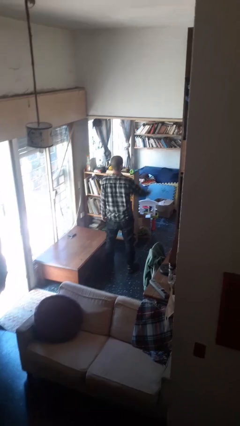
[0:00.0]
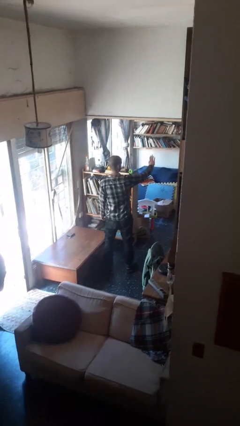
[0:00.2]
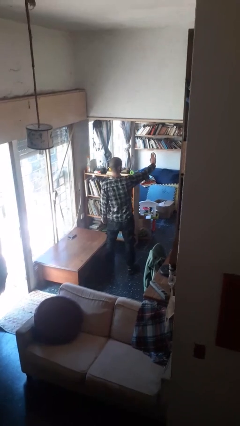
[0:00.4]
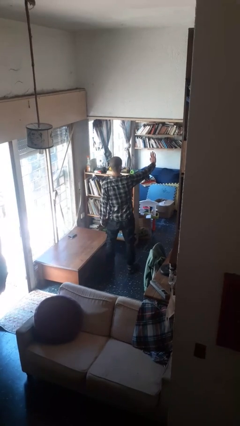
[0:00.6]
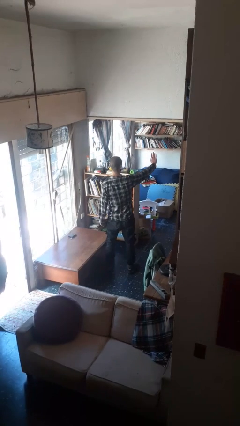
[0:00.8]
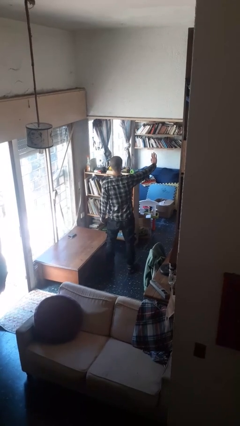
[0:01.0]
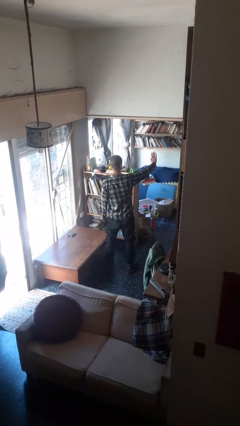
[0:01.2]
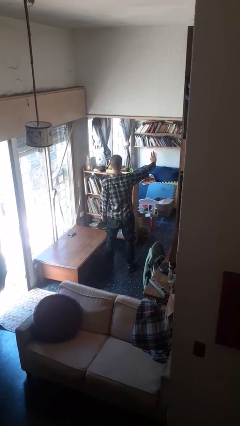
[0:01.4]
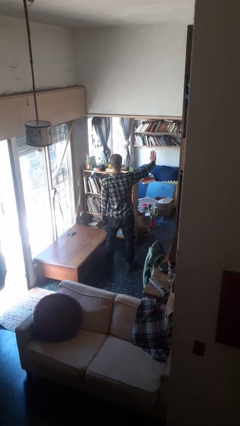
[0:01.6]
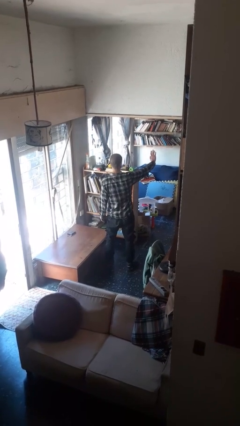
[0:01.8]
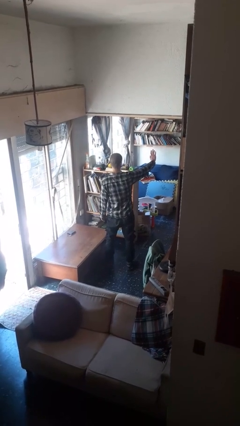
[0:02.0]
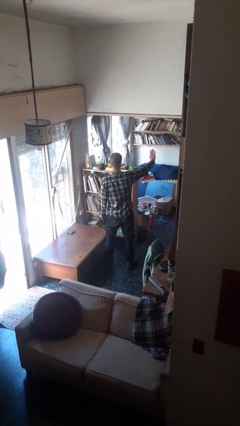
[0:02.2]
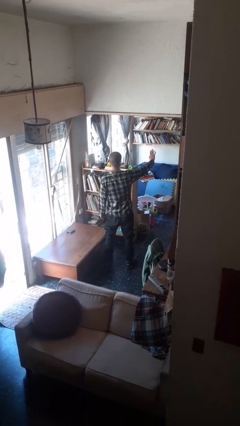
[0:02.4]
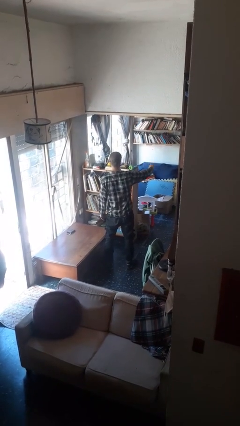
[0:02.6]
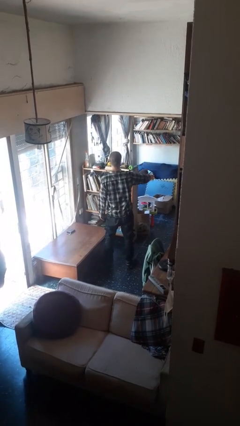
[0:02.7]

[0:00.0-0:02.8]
person gestures stop

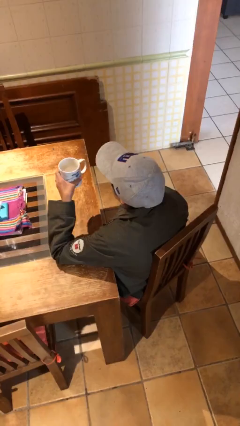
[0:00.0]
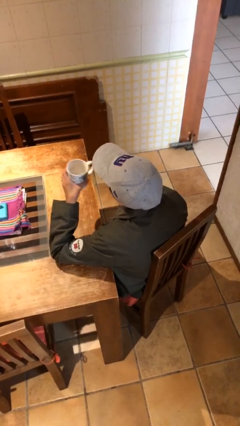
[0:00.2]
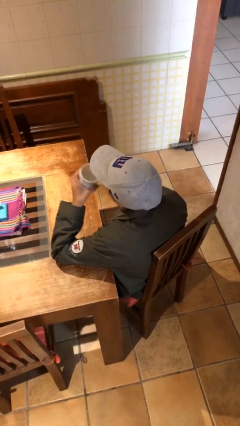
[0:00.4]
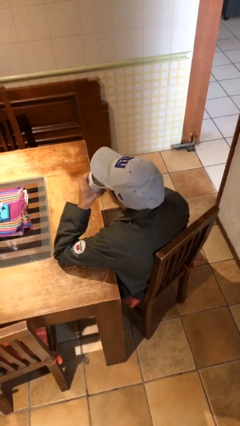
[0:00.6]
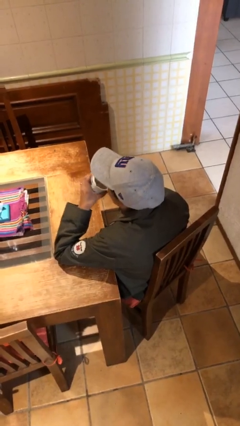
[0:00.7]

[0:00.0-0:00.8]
person drinks from mug

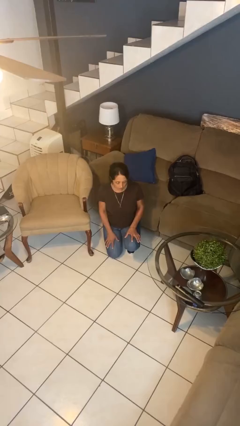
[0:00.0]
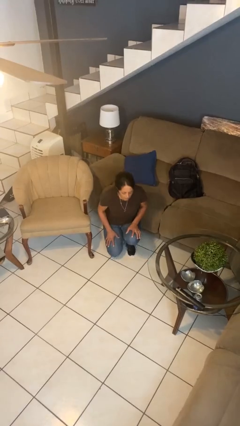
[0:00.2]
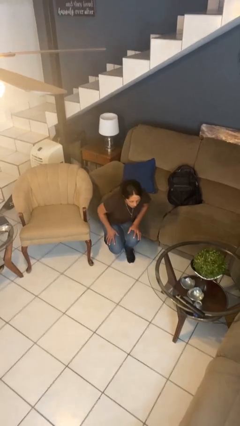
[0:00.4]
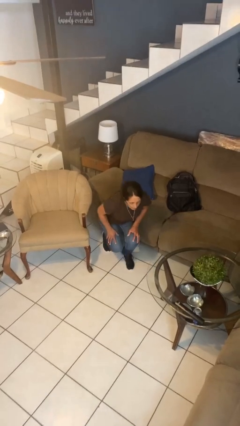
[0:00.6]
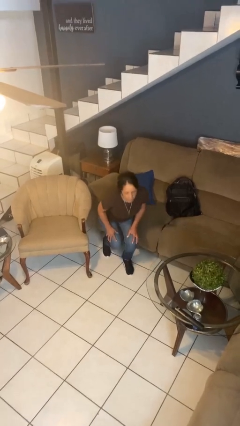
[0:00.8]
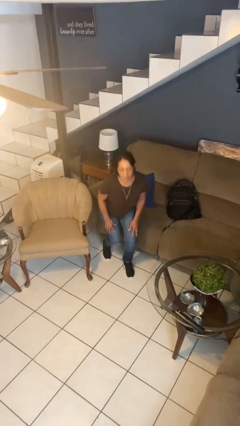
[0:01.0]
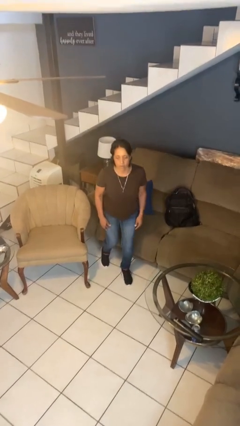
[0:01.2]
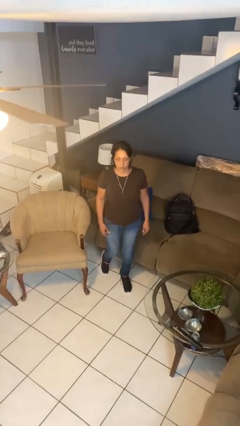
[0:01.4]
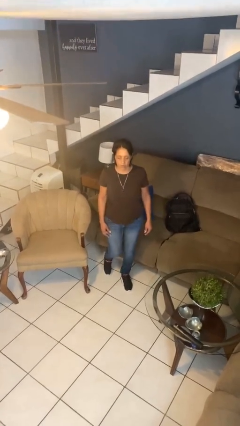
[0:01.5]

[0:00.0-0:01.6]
person stands up from floor

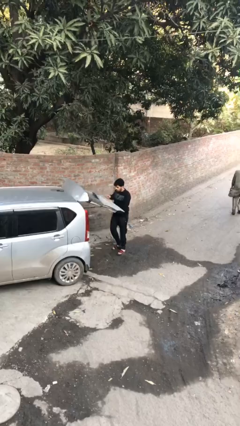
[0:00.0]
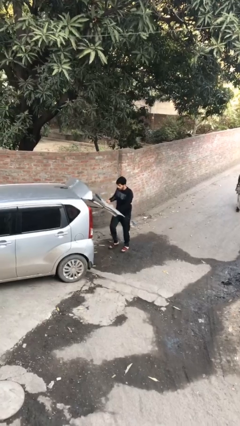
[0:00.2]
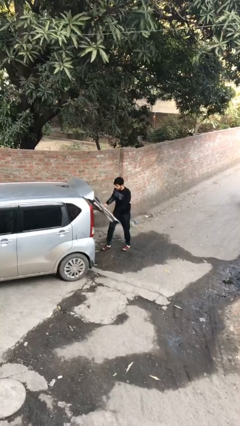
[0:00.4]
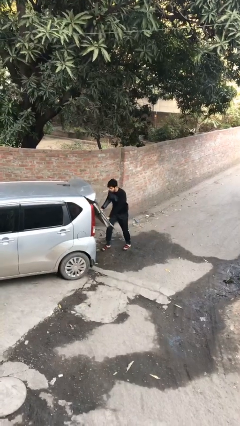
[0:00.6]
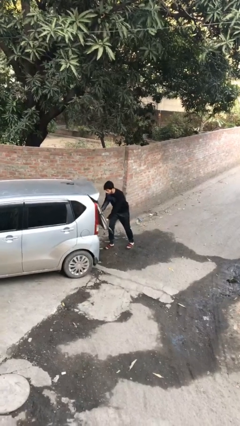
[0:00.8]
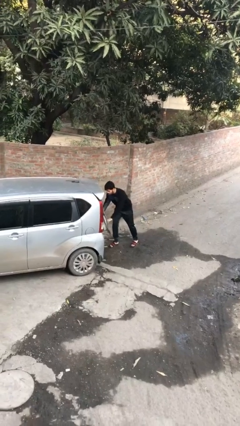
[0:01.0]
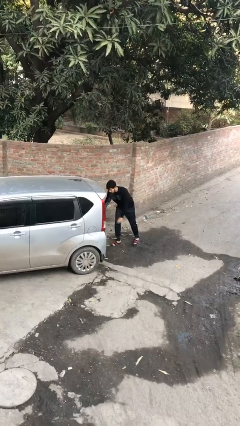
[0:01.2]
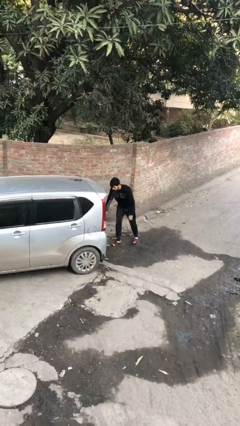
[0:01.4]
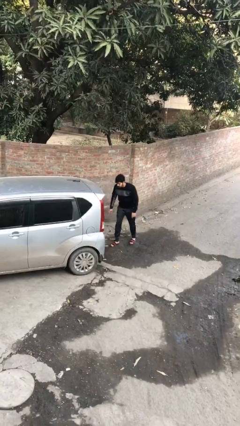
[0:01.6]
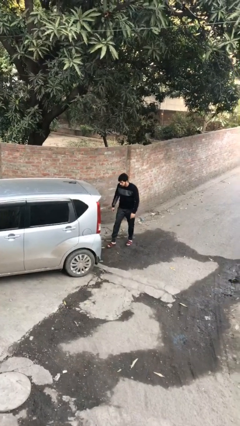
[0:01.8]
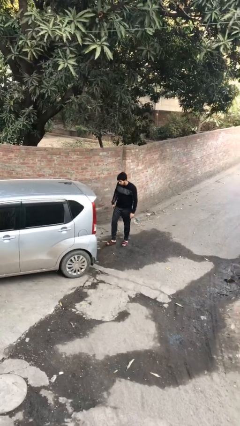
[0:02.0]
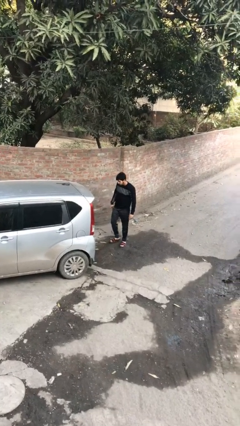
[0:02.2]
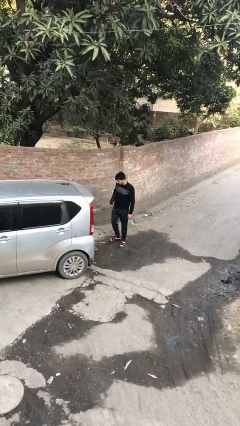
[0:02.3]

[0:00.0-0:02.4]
person closes car trunk

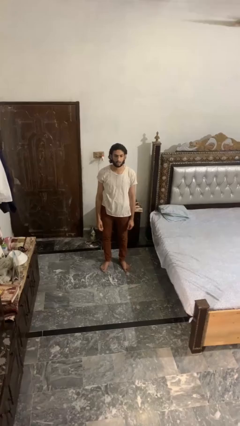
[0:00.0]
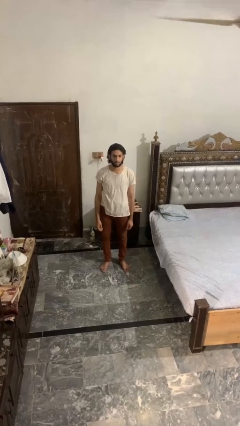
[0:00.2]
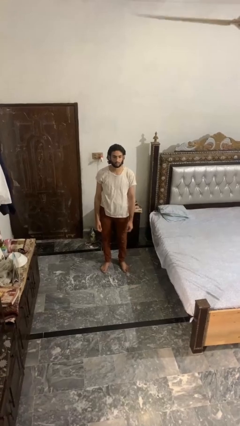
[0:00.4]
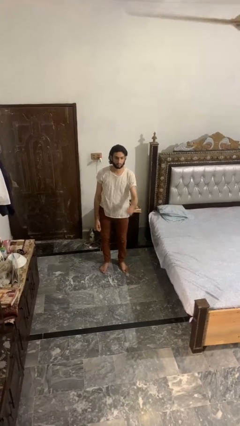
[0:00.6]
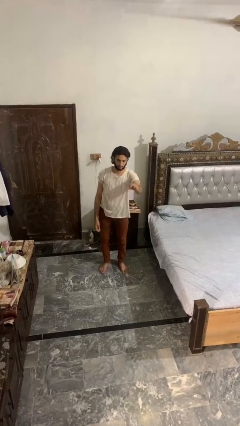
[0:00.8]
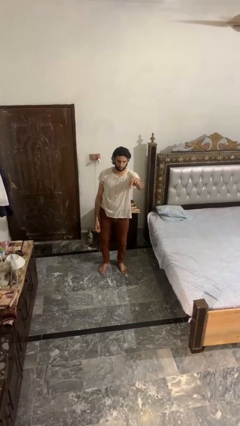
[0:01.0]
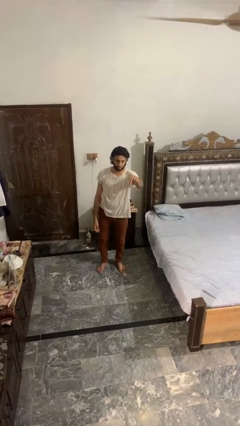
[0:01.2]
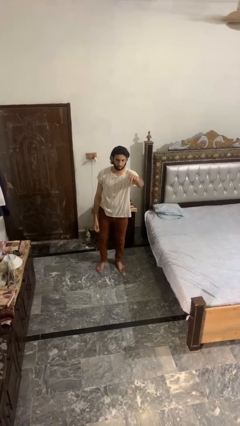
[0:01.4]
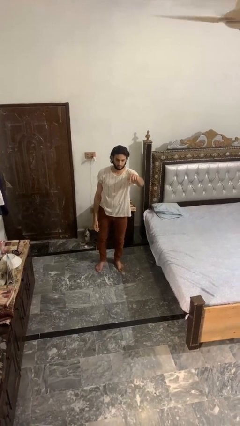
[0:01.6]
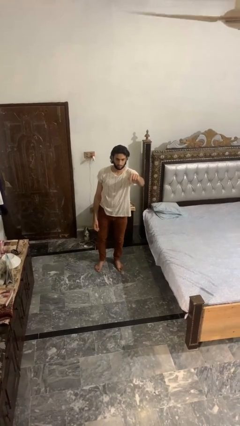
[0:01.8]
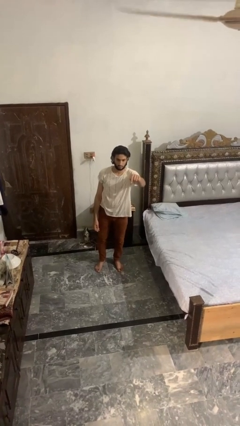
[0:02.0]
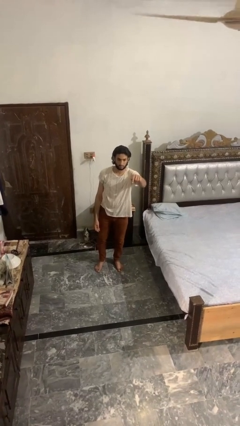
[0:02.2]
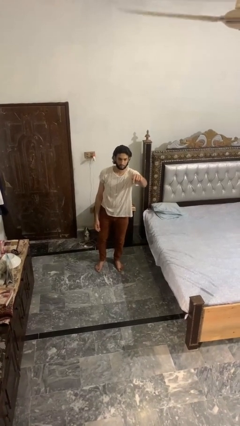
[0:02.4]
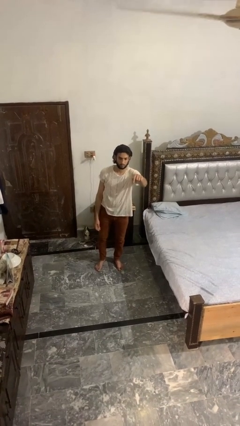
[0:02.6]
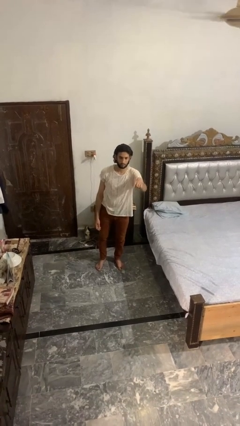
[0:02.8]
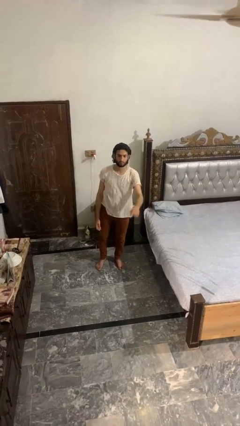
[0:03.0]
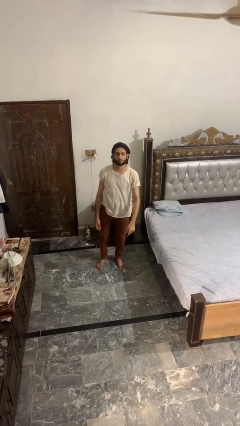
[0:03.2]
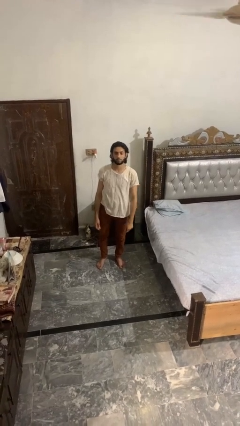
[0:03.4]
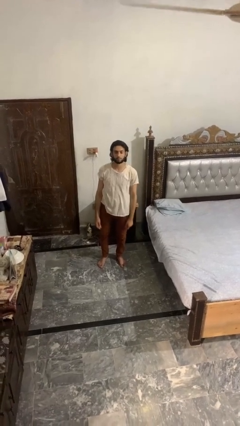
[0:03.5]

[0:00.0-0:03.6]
person gestures come here

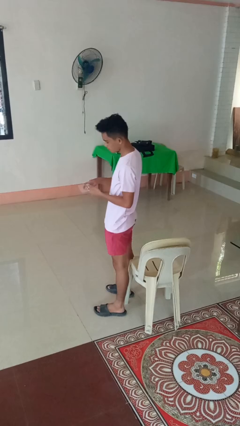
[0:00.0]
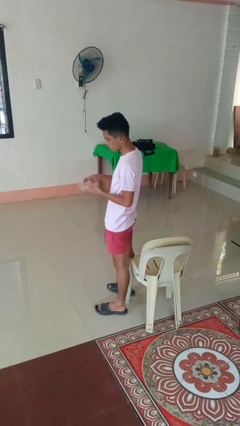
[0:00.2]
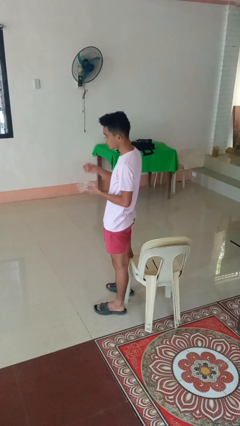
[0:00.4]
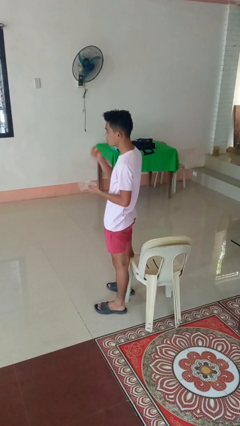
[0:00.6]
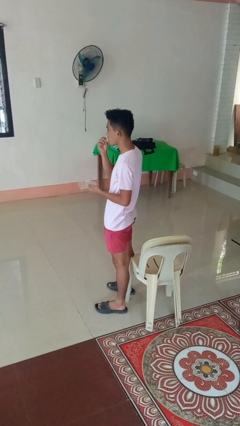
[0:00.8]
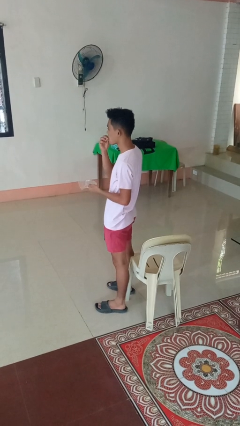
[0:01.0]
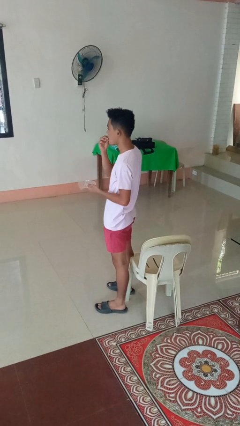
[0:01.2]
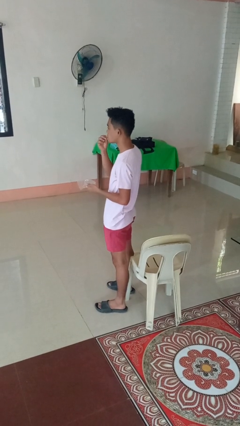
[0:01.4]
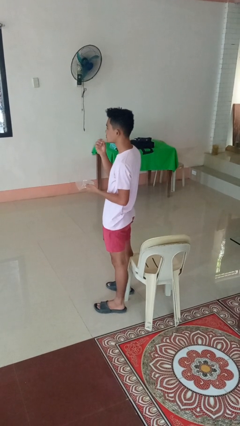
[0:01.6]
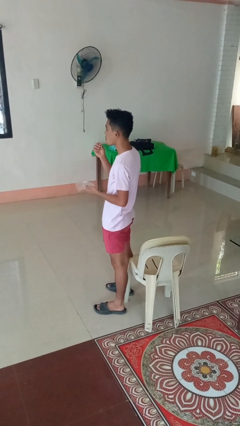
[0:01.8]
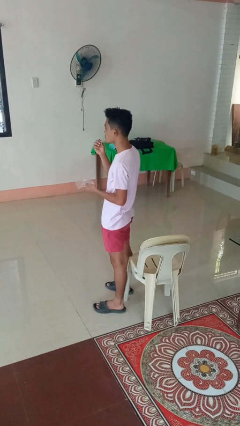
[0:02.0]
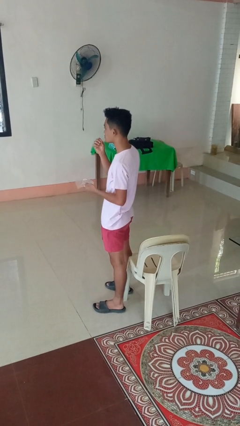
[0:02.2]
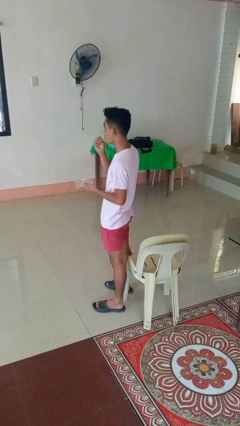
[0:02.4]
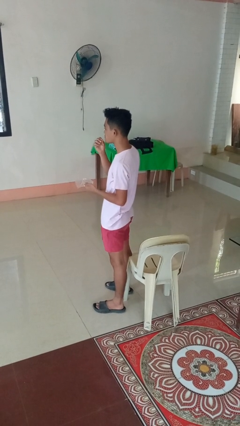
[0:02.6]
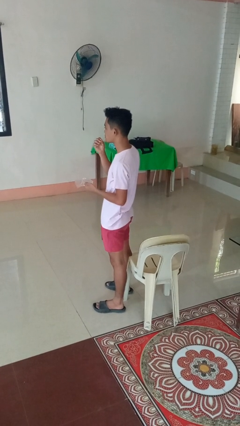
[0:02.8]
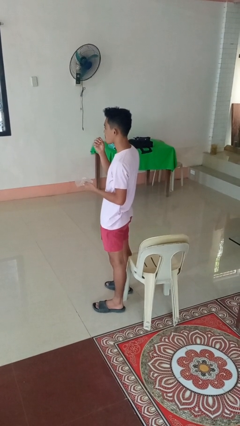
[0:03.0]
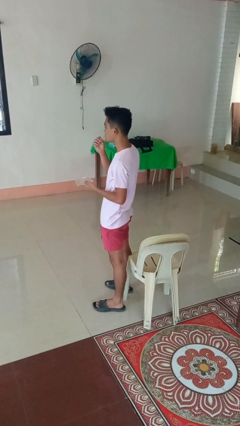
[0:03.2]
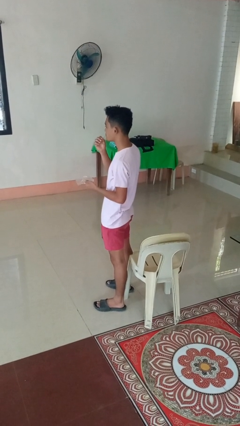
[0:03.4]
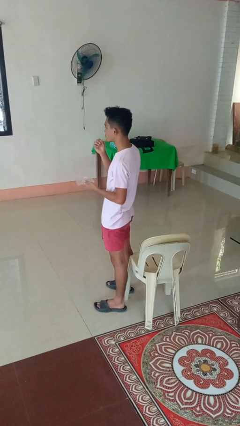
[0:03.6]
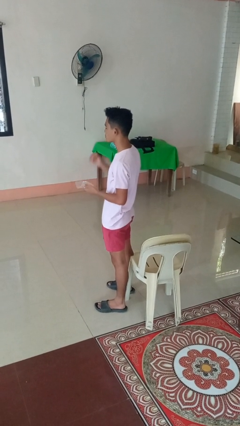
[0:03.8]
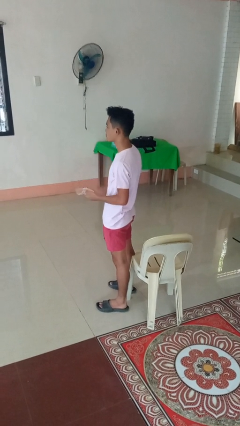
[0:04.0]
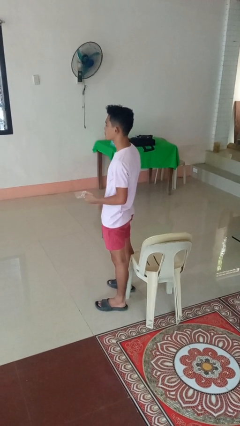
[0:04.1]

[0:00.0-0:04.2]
person eats snack from bag

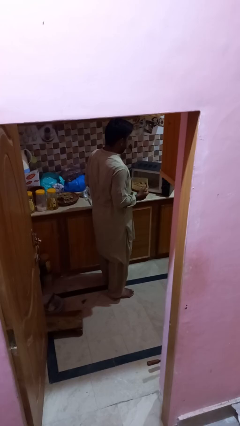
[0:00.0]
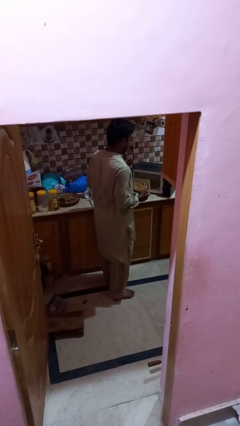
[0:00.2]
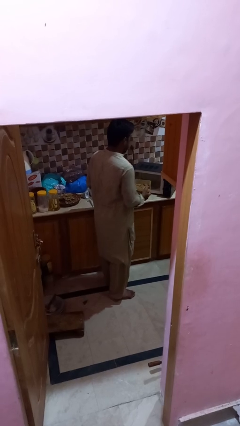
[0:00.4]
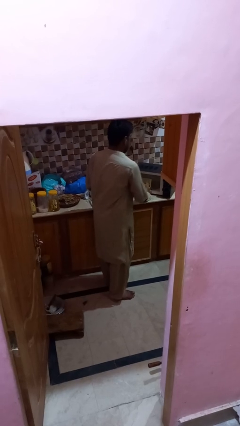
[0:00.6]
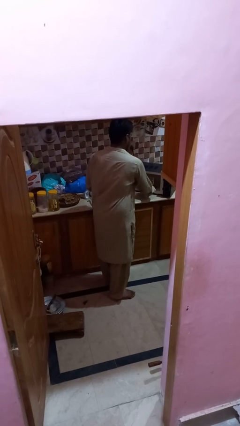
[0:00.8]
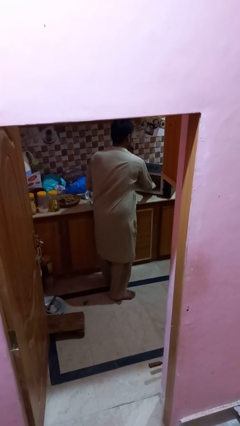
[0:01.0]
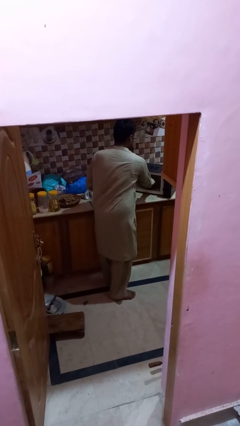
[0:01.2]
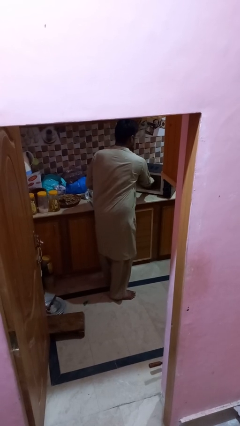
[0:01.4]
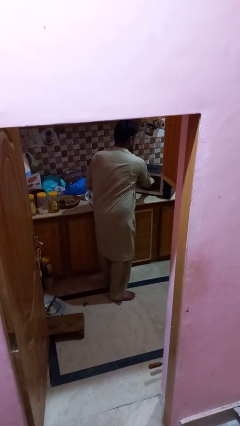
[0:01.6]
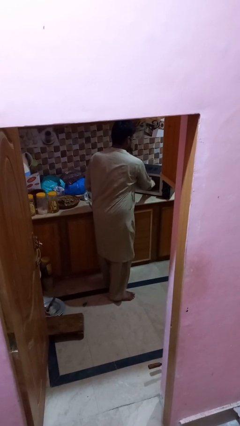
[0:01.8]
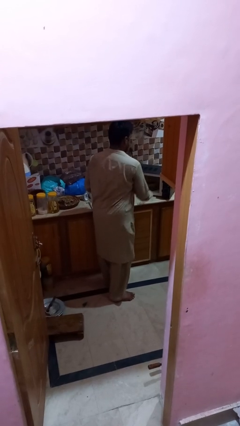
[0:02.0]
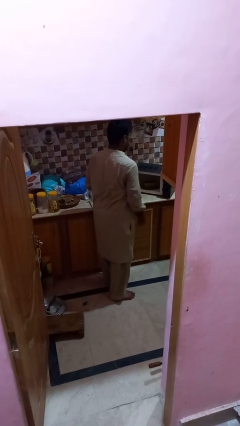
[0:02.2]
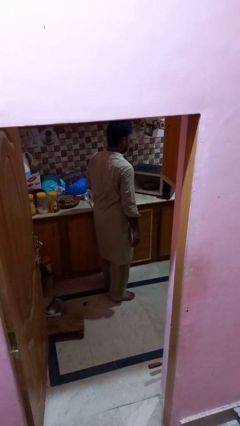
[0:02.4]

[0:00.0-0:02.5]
person puts object into microwave
